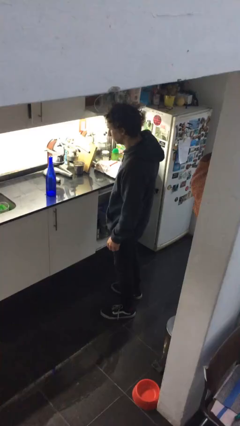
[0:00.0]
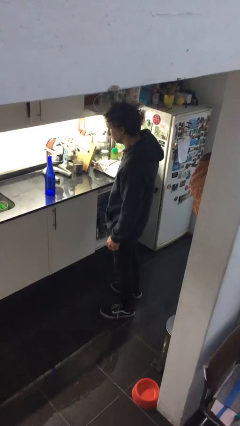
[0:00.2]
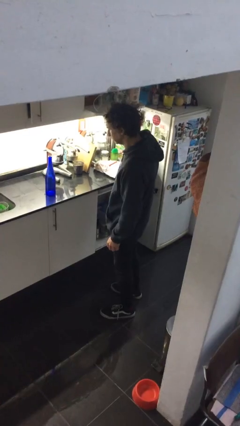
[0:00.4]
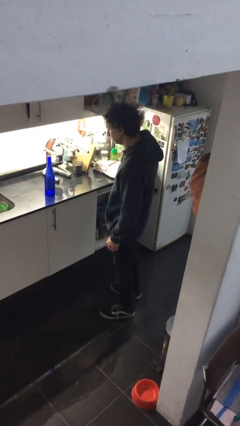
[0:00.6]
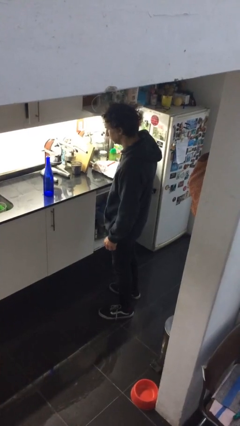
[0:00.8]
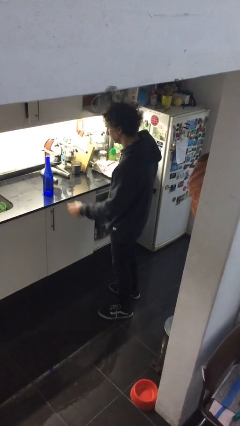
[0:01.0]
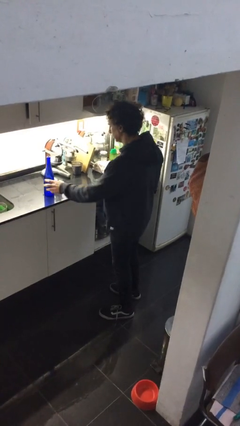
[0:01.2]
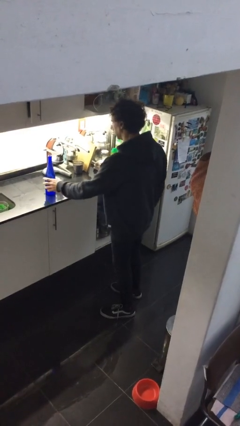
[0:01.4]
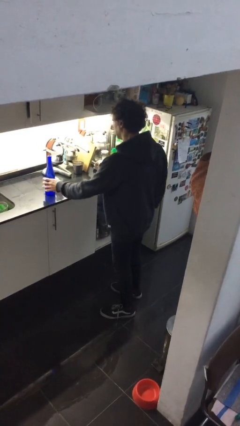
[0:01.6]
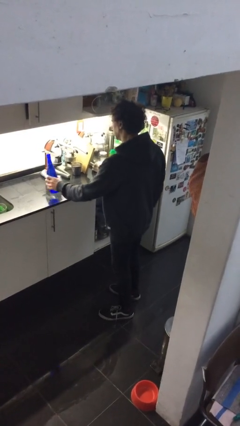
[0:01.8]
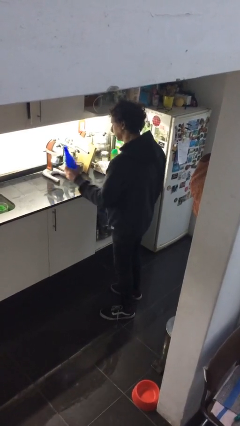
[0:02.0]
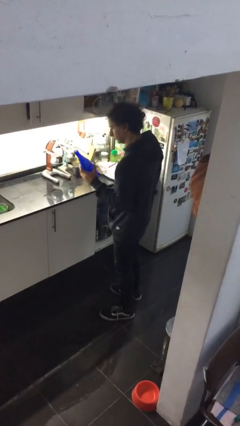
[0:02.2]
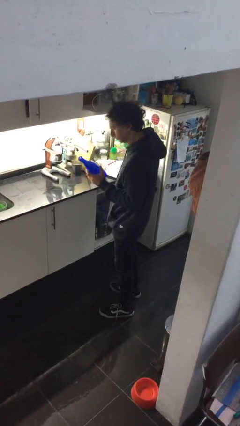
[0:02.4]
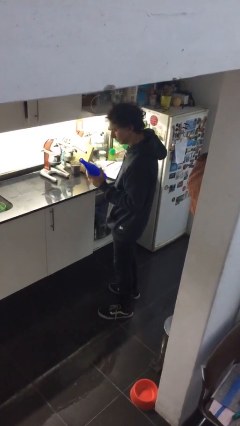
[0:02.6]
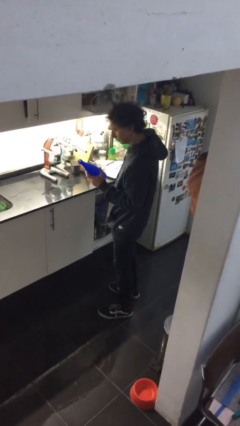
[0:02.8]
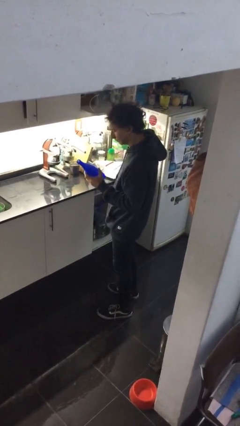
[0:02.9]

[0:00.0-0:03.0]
person picks up object from countertop

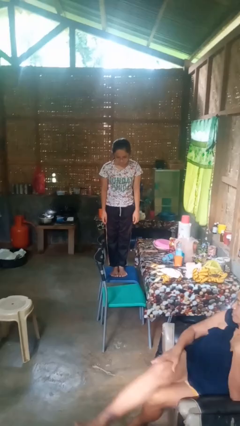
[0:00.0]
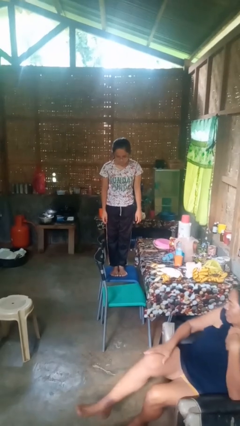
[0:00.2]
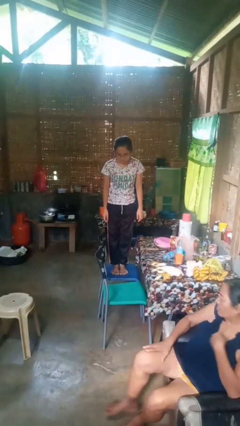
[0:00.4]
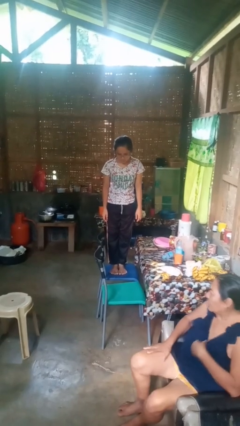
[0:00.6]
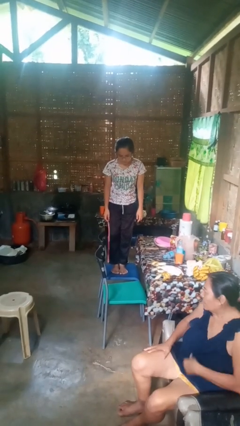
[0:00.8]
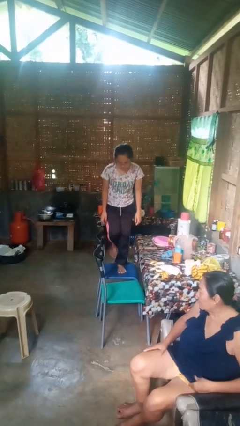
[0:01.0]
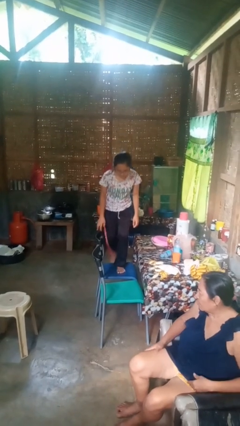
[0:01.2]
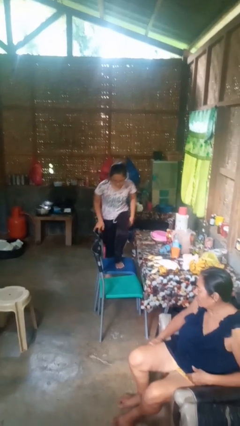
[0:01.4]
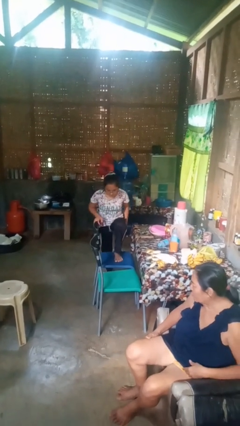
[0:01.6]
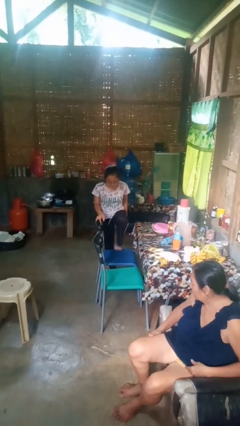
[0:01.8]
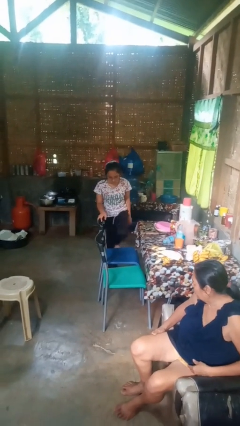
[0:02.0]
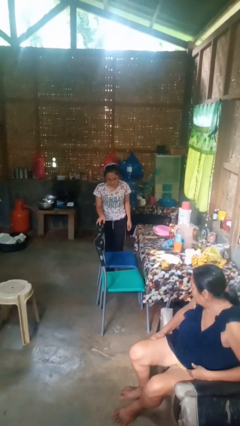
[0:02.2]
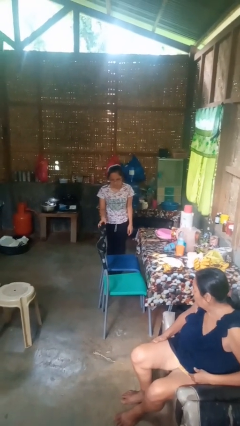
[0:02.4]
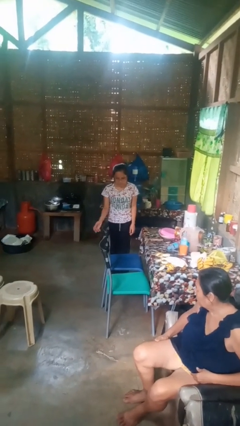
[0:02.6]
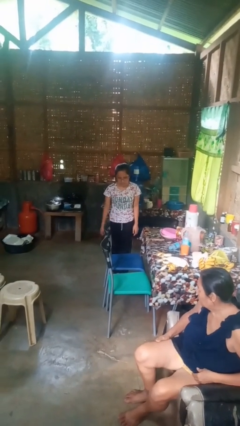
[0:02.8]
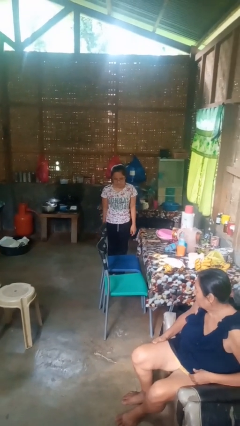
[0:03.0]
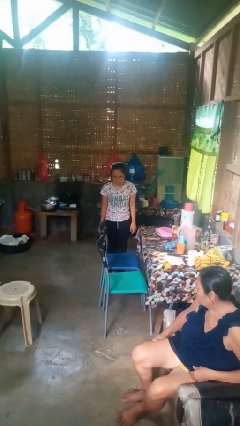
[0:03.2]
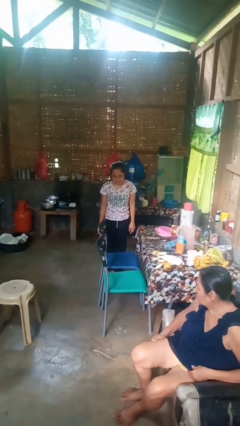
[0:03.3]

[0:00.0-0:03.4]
person climbs off chair

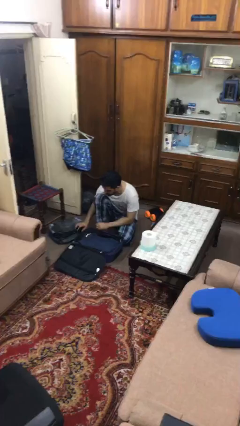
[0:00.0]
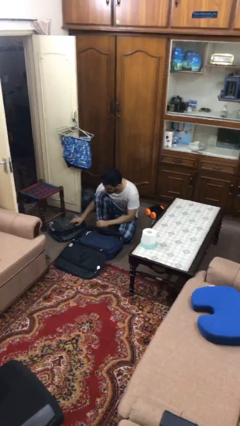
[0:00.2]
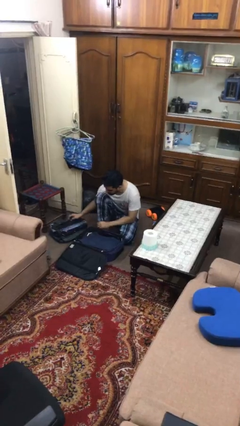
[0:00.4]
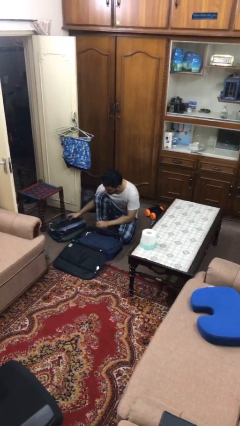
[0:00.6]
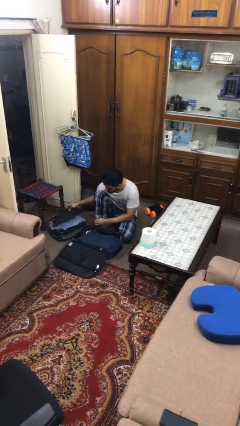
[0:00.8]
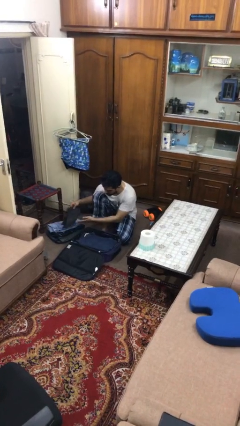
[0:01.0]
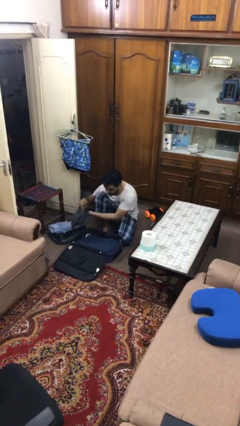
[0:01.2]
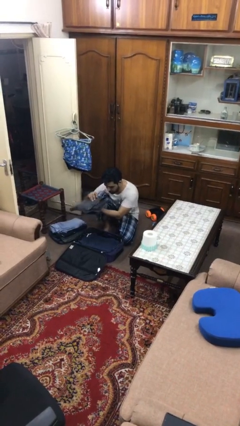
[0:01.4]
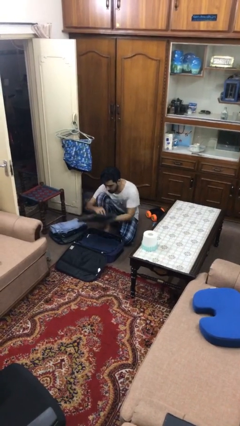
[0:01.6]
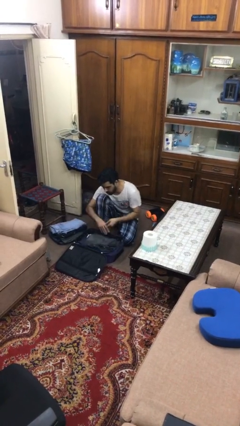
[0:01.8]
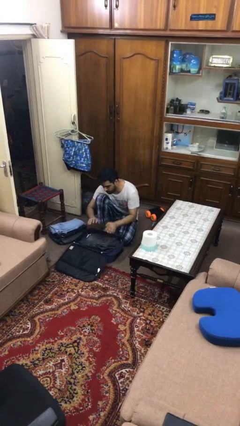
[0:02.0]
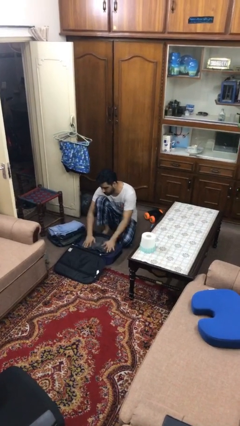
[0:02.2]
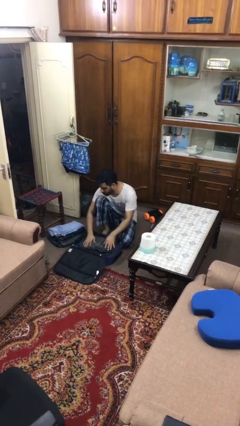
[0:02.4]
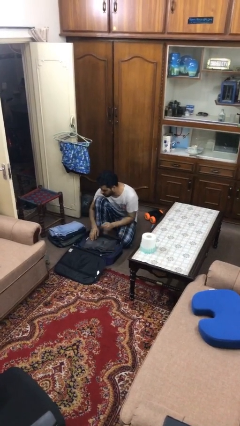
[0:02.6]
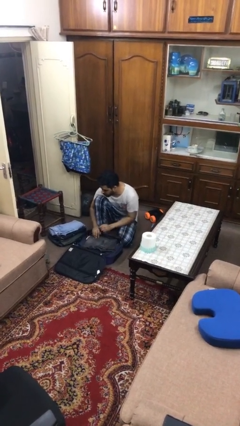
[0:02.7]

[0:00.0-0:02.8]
person loads clothes into suitcase

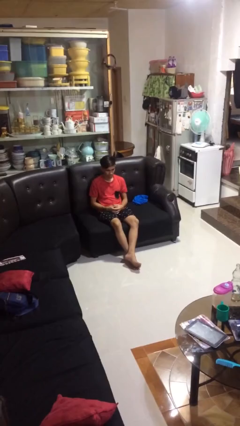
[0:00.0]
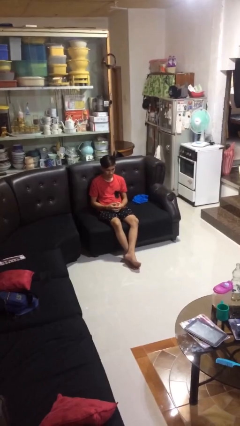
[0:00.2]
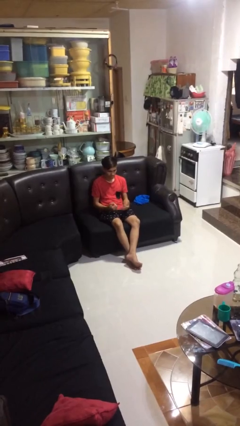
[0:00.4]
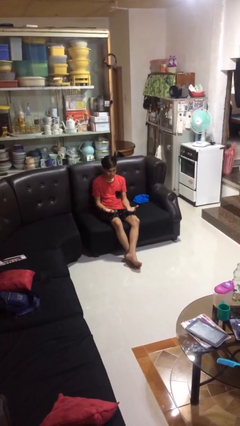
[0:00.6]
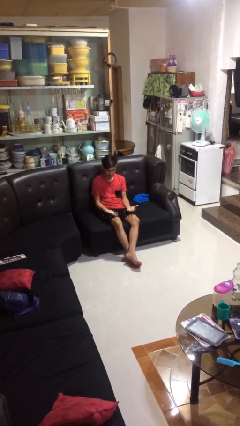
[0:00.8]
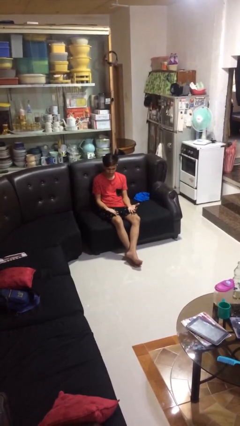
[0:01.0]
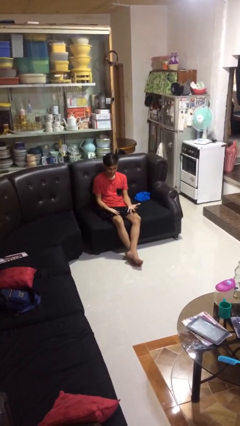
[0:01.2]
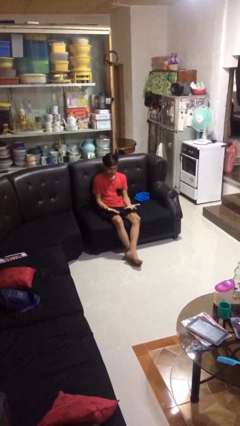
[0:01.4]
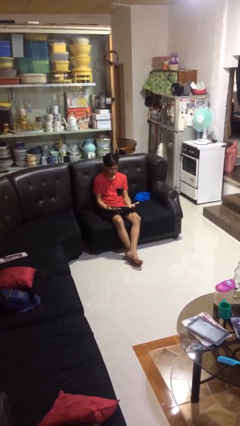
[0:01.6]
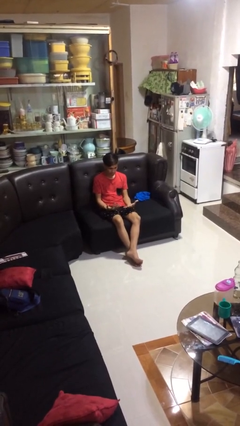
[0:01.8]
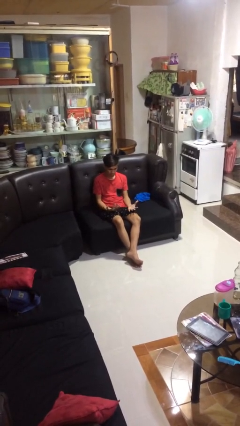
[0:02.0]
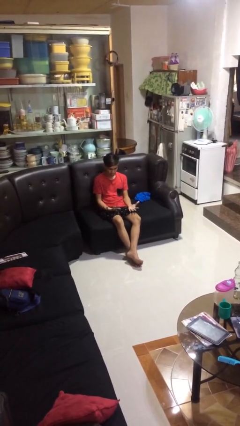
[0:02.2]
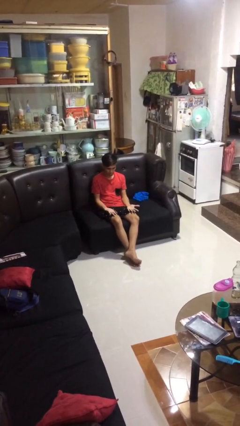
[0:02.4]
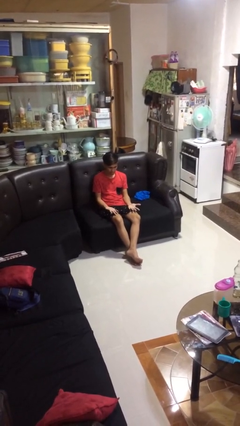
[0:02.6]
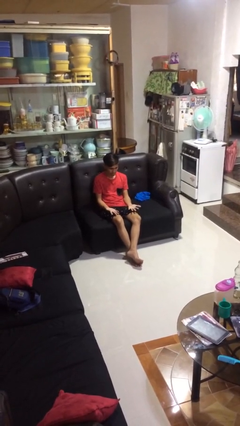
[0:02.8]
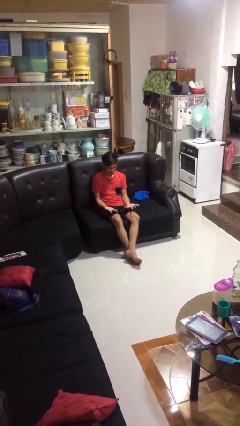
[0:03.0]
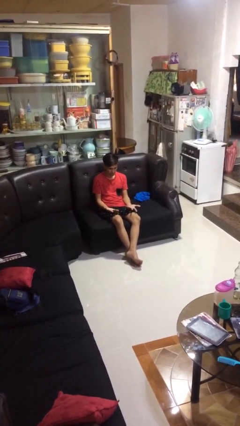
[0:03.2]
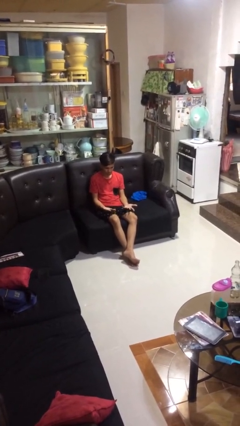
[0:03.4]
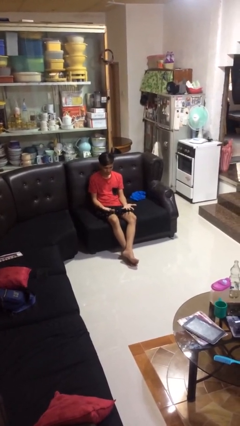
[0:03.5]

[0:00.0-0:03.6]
person looks at hands in lap

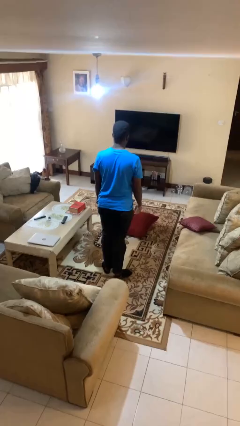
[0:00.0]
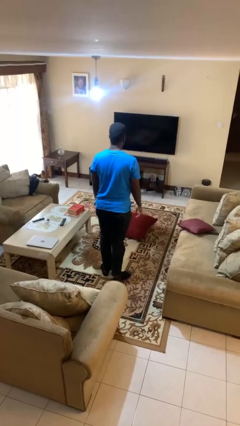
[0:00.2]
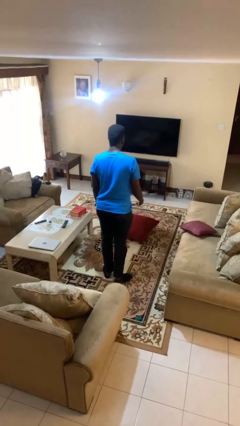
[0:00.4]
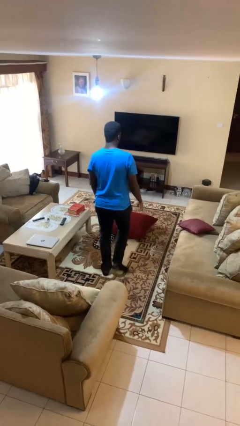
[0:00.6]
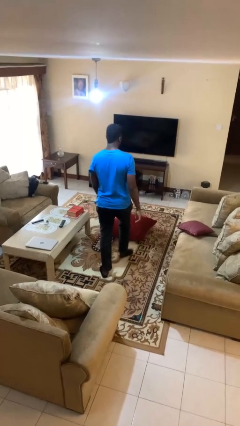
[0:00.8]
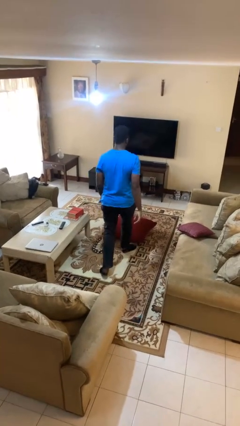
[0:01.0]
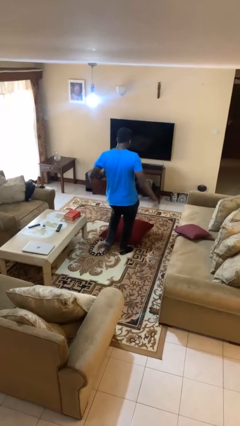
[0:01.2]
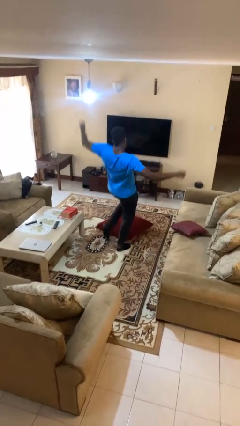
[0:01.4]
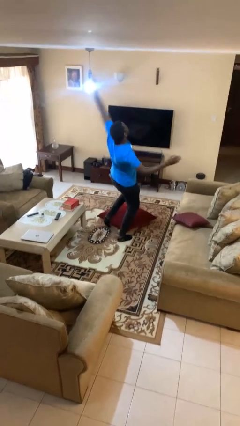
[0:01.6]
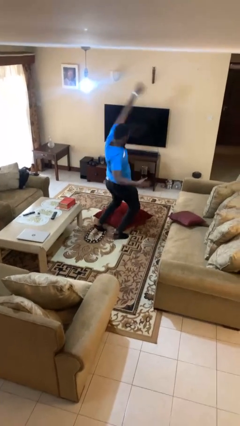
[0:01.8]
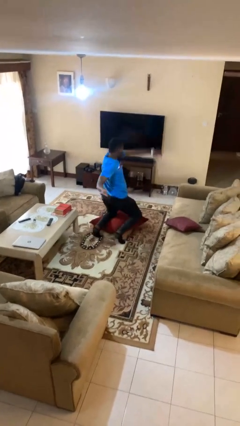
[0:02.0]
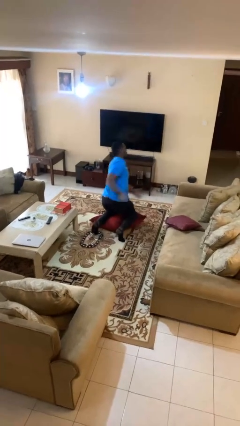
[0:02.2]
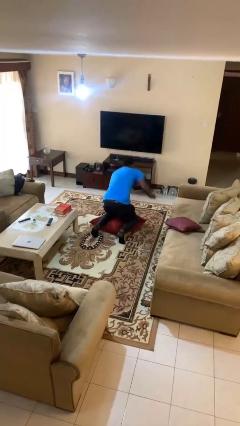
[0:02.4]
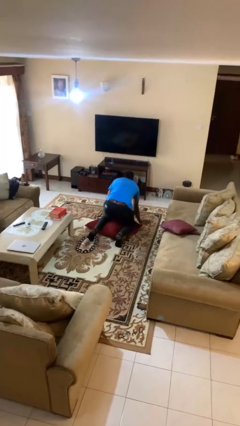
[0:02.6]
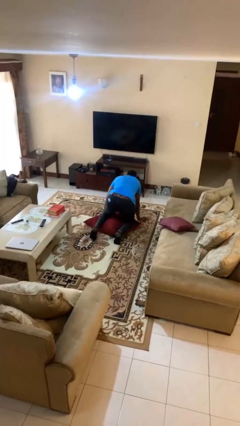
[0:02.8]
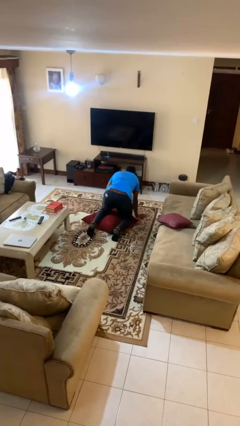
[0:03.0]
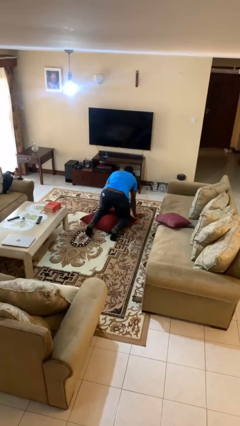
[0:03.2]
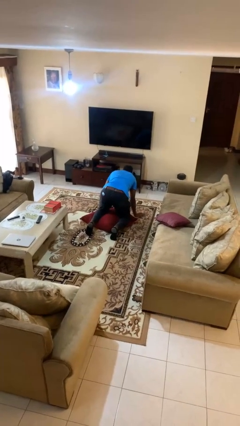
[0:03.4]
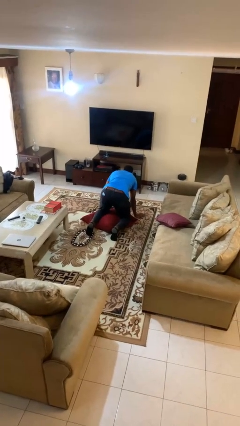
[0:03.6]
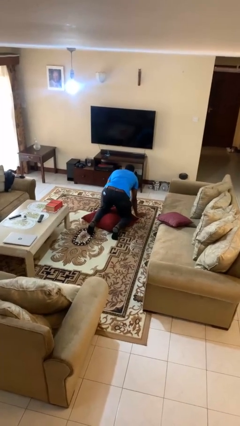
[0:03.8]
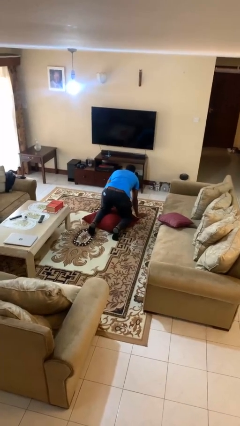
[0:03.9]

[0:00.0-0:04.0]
person trips on object on floor

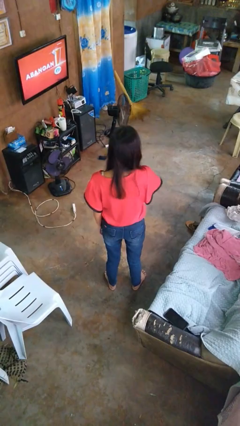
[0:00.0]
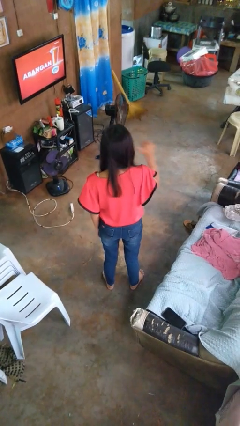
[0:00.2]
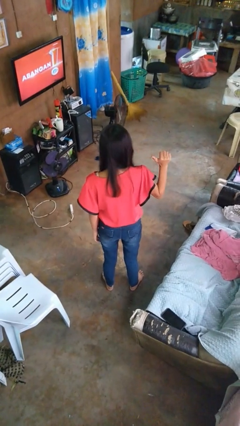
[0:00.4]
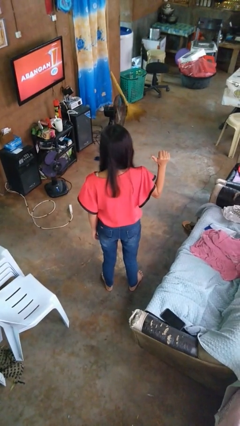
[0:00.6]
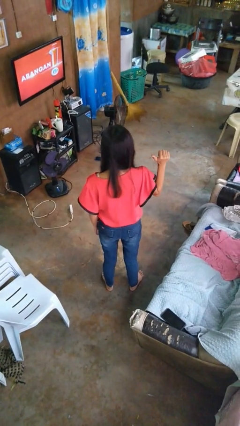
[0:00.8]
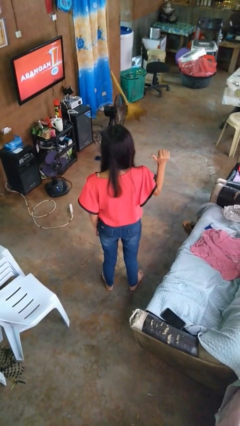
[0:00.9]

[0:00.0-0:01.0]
person gestures cut
